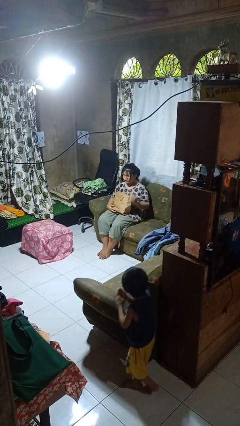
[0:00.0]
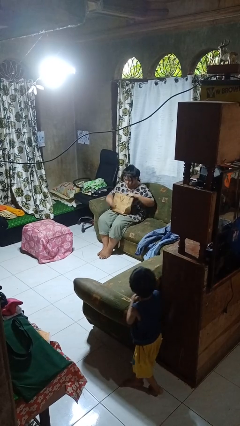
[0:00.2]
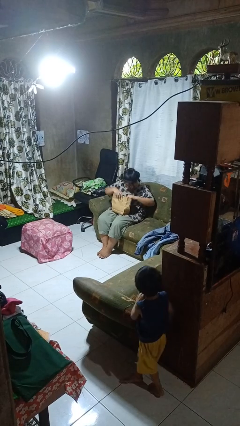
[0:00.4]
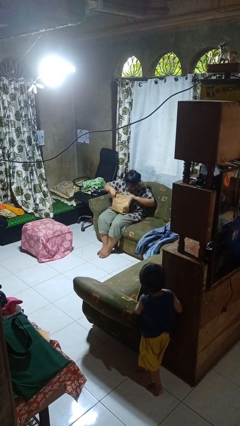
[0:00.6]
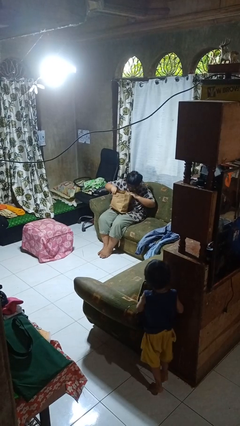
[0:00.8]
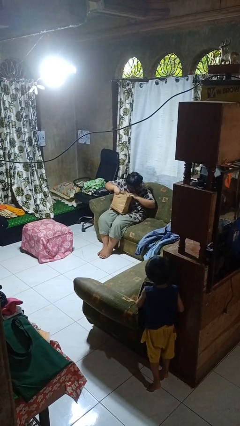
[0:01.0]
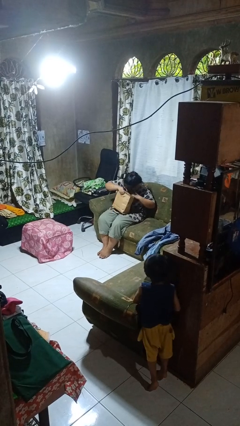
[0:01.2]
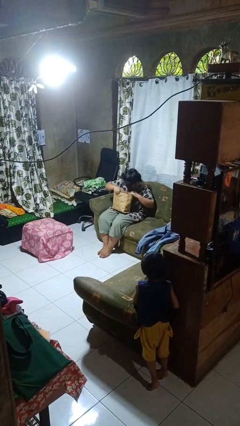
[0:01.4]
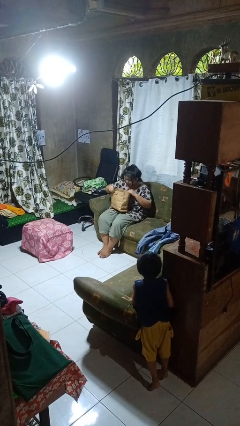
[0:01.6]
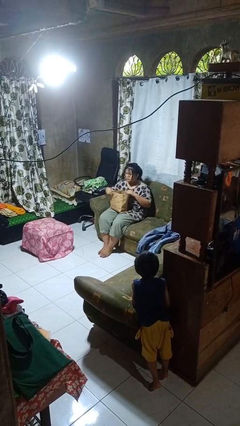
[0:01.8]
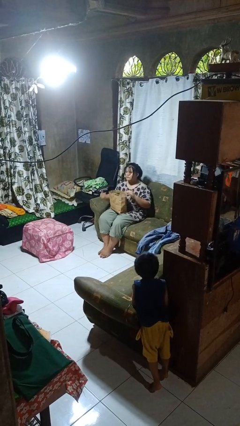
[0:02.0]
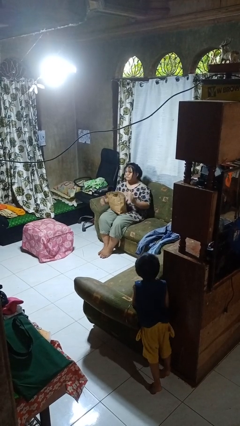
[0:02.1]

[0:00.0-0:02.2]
person searches in bag

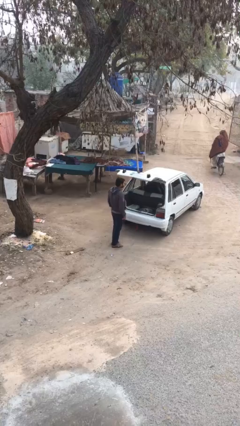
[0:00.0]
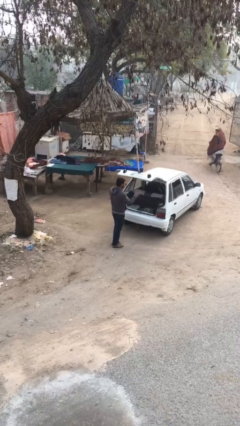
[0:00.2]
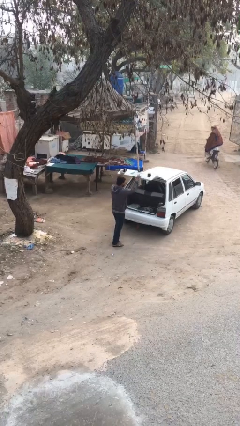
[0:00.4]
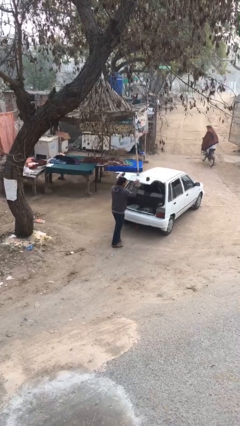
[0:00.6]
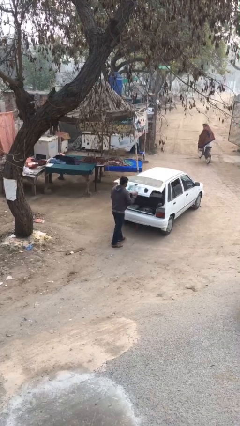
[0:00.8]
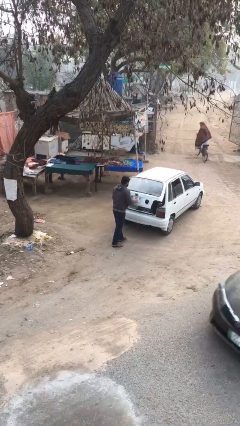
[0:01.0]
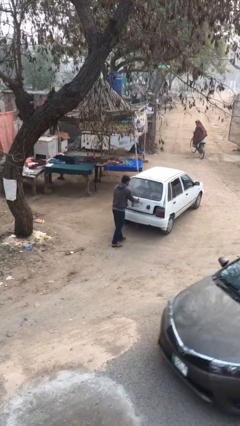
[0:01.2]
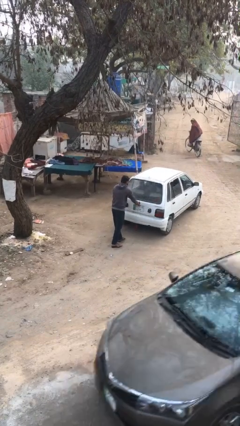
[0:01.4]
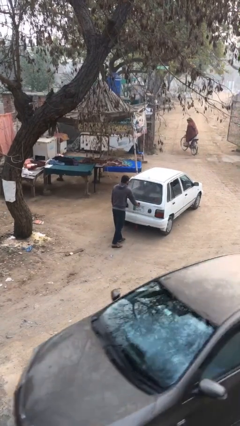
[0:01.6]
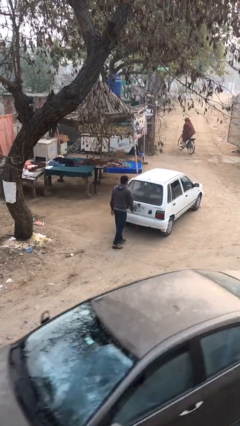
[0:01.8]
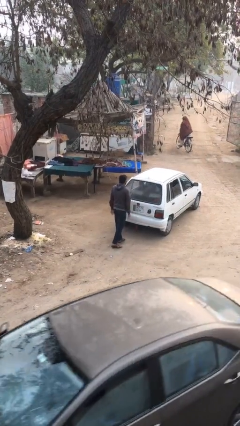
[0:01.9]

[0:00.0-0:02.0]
person closes car trunk

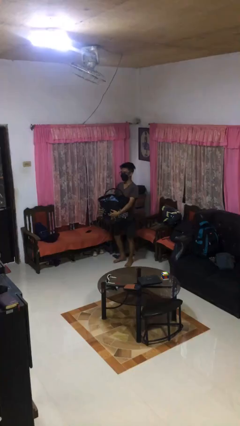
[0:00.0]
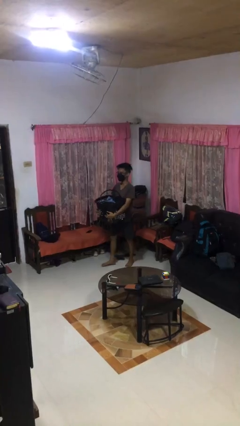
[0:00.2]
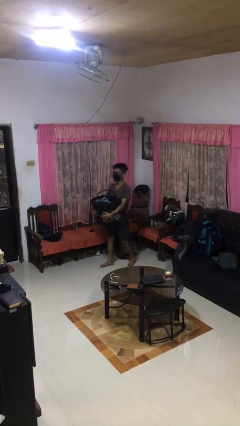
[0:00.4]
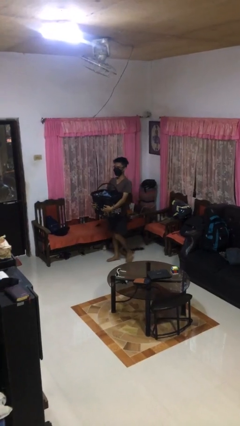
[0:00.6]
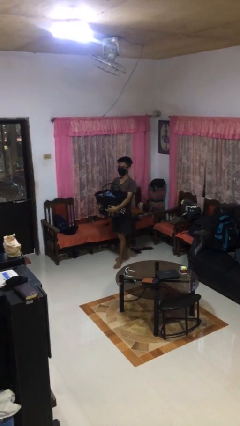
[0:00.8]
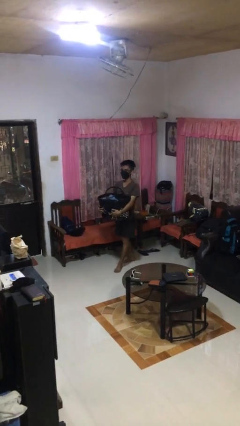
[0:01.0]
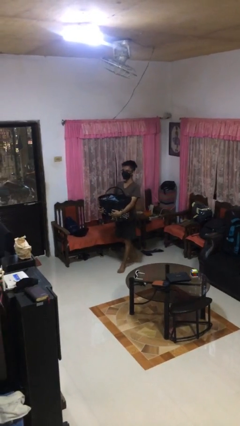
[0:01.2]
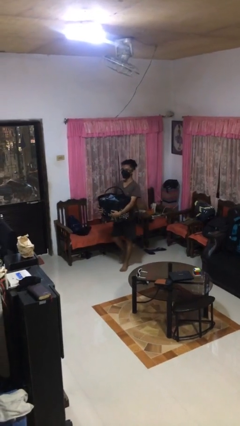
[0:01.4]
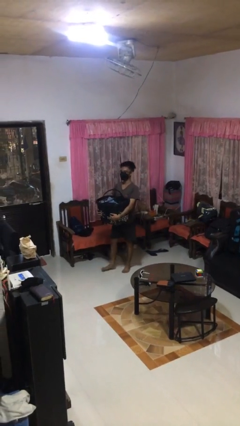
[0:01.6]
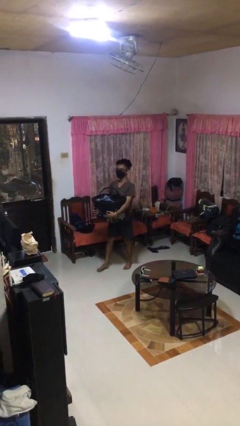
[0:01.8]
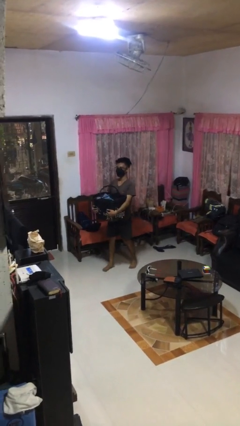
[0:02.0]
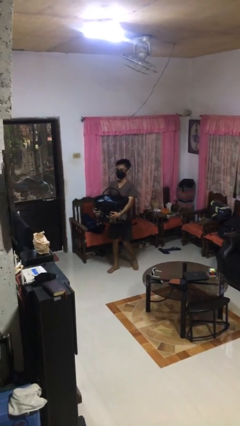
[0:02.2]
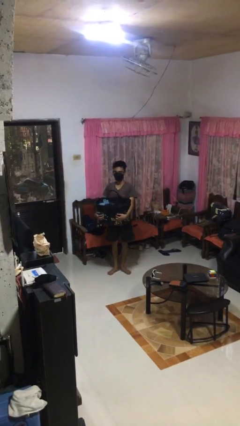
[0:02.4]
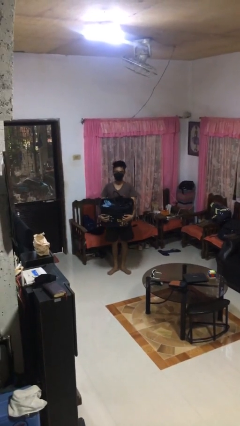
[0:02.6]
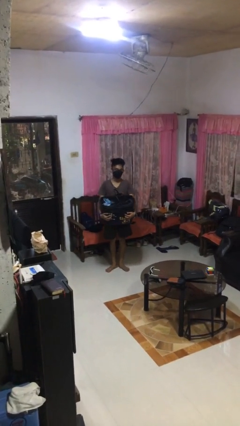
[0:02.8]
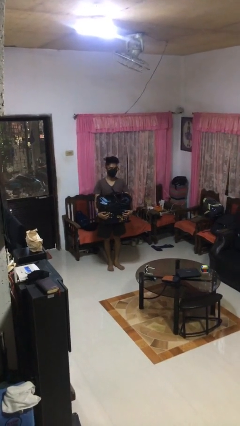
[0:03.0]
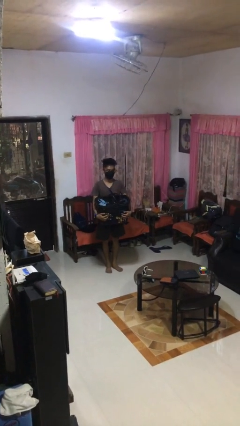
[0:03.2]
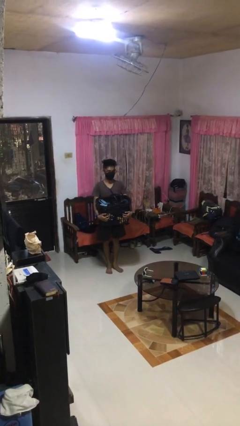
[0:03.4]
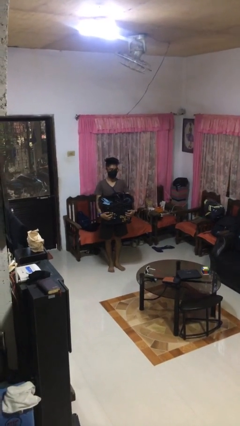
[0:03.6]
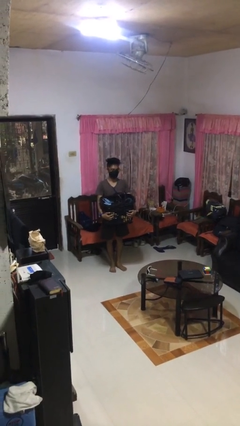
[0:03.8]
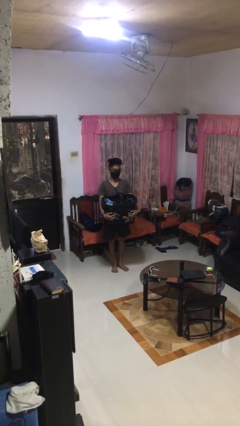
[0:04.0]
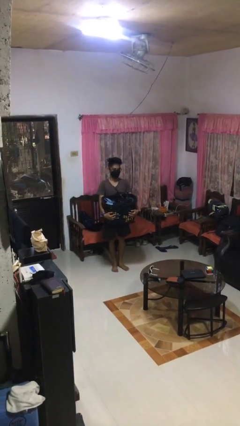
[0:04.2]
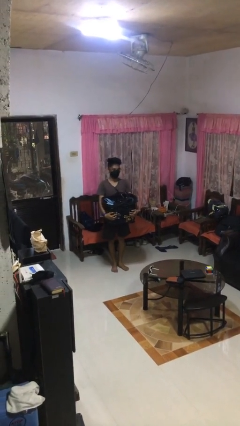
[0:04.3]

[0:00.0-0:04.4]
person carries laundry basket

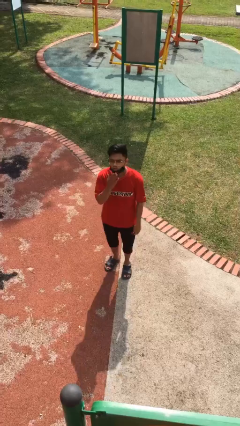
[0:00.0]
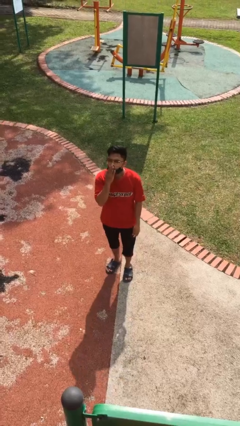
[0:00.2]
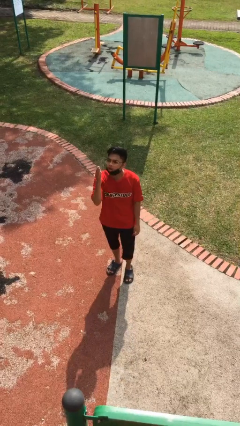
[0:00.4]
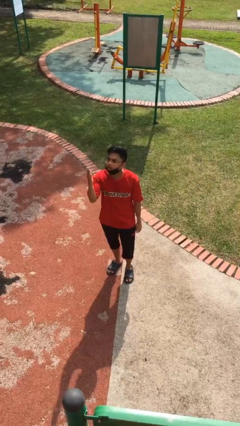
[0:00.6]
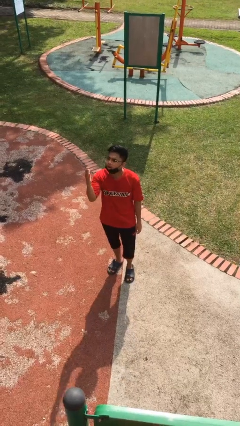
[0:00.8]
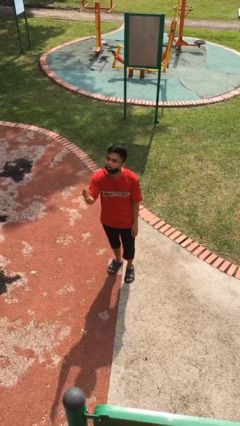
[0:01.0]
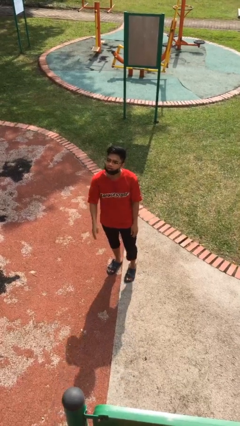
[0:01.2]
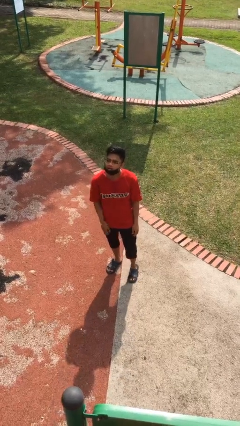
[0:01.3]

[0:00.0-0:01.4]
person gestures blow kiss

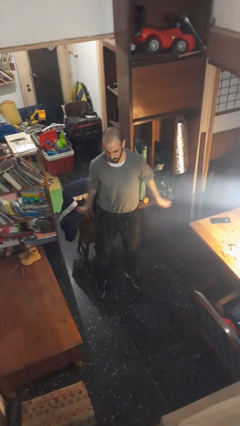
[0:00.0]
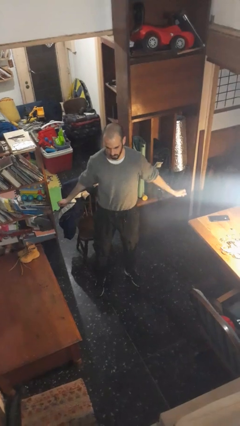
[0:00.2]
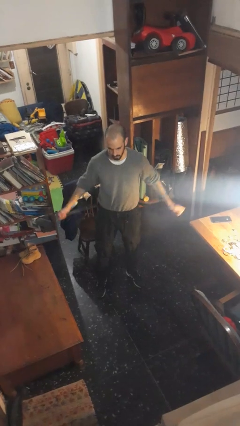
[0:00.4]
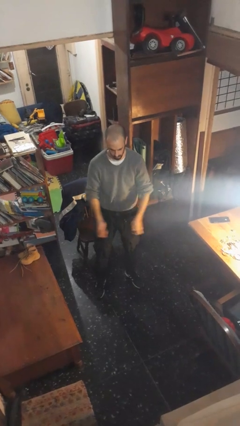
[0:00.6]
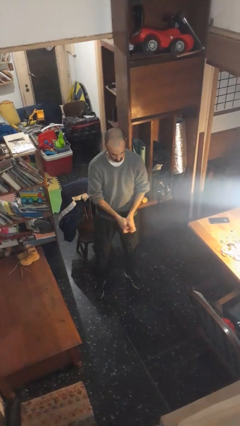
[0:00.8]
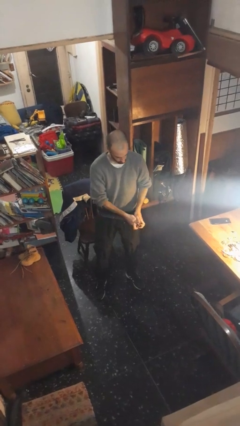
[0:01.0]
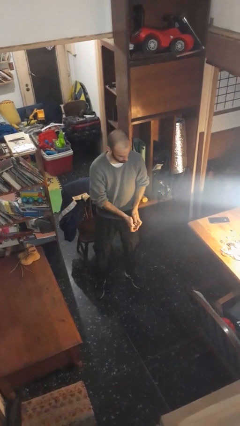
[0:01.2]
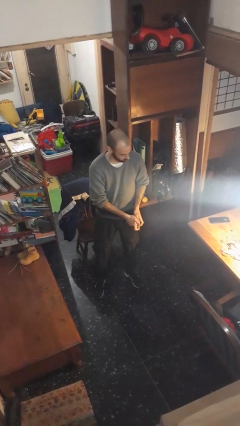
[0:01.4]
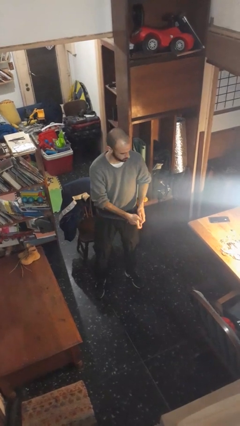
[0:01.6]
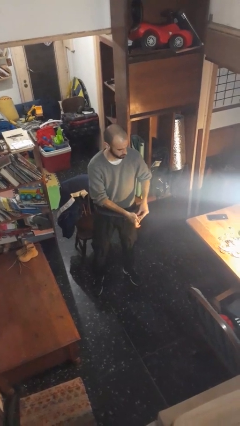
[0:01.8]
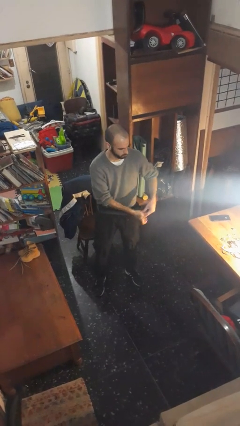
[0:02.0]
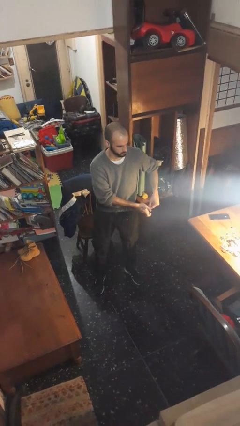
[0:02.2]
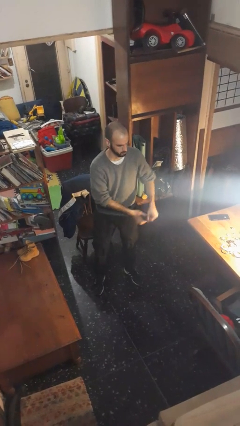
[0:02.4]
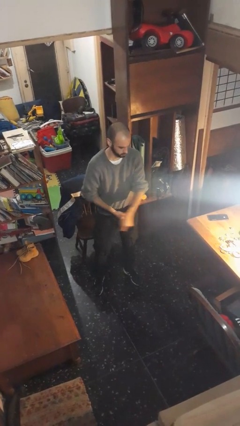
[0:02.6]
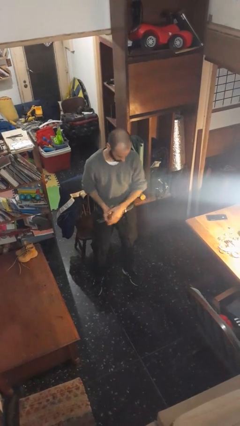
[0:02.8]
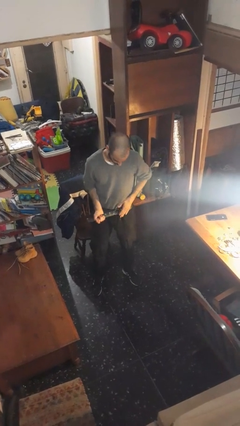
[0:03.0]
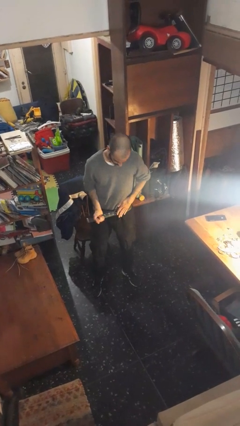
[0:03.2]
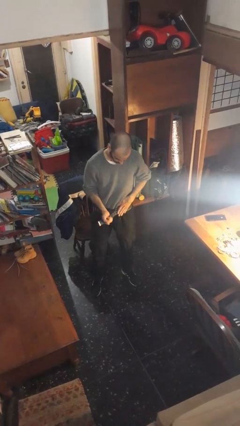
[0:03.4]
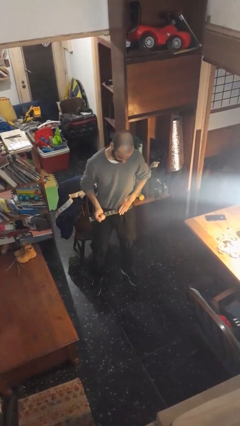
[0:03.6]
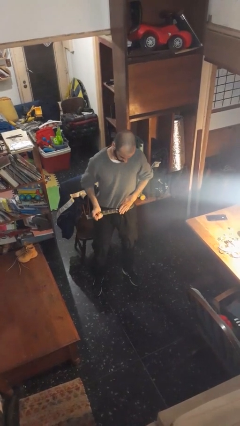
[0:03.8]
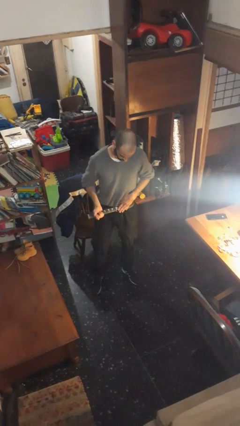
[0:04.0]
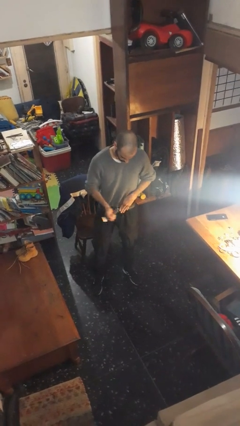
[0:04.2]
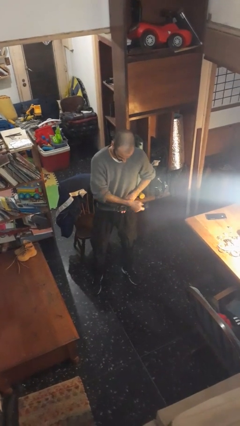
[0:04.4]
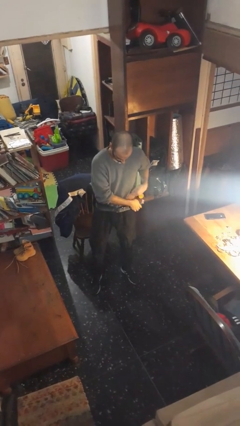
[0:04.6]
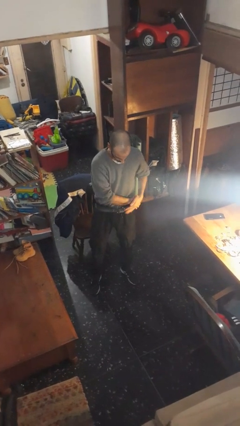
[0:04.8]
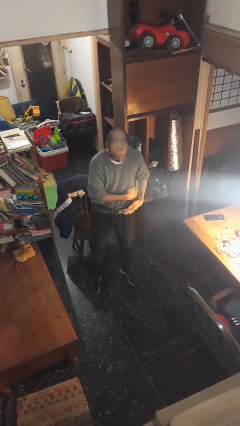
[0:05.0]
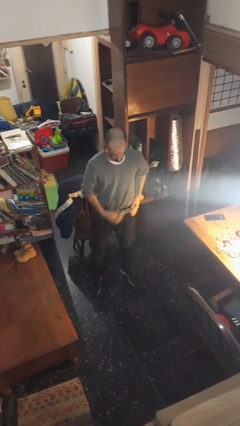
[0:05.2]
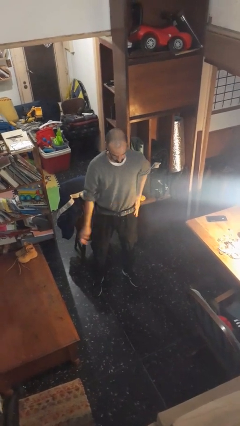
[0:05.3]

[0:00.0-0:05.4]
person puts on belt

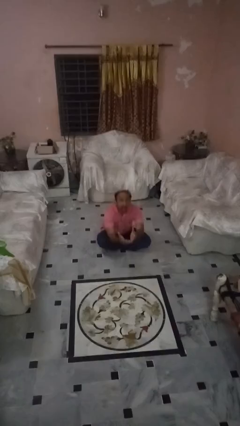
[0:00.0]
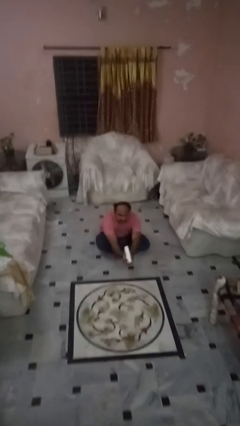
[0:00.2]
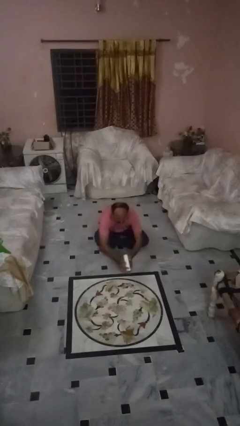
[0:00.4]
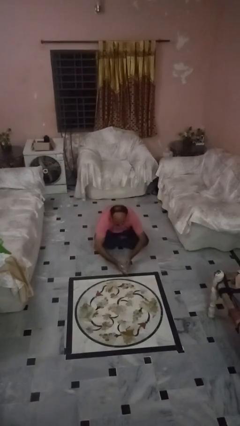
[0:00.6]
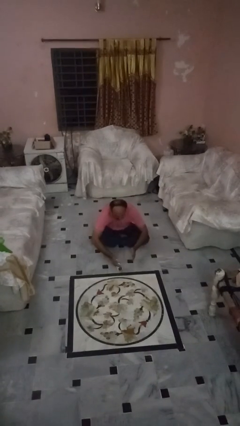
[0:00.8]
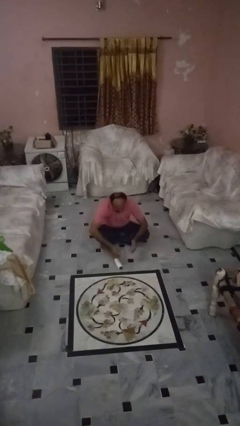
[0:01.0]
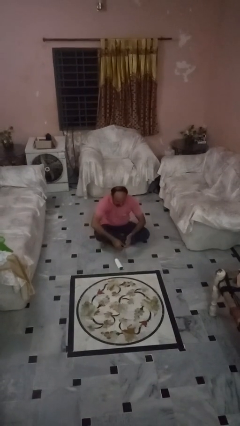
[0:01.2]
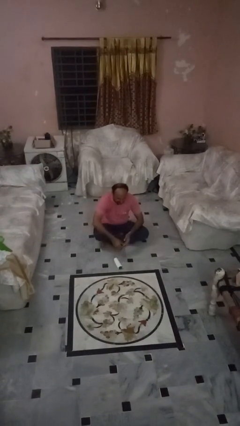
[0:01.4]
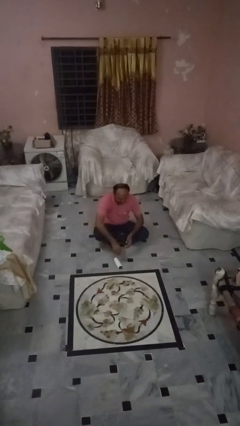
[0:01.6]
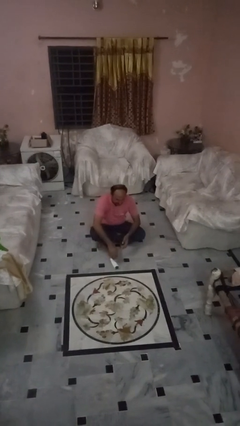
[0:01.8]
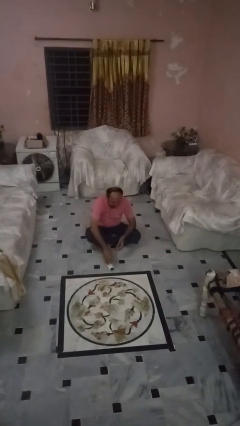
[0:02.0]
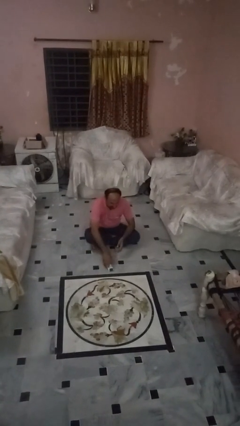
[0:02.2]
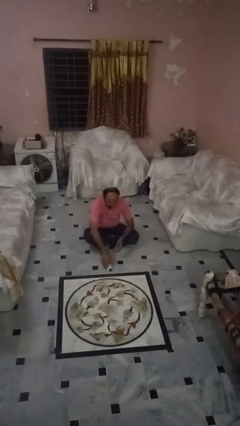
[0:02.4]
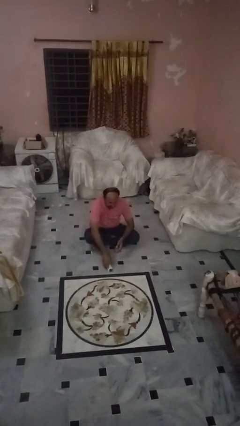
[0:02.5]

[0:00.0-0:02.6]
person catches dropped object
